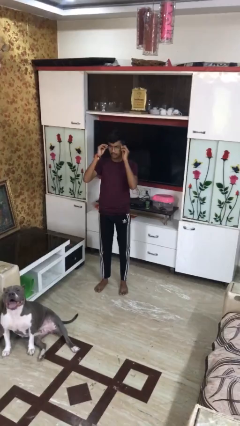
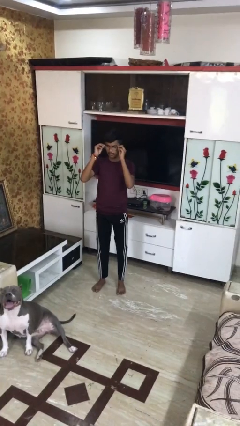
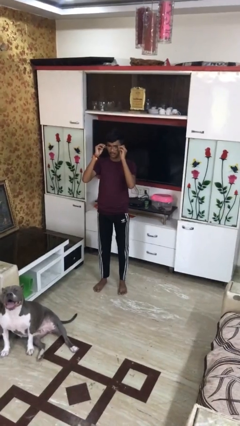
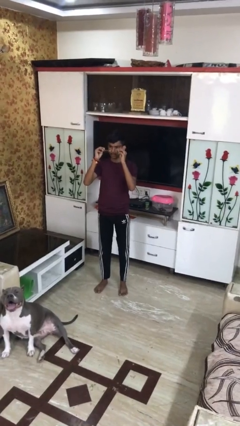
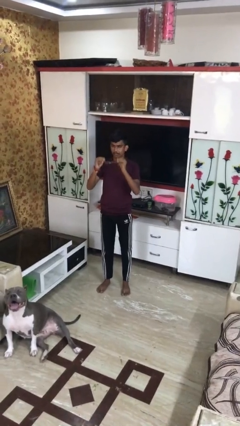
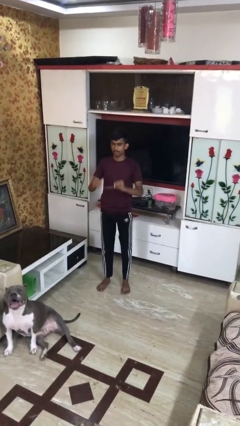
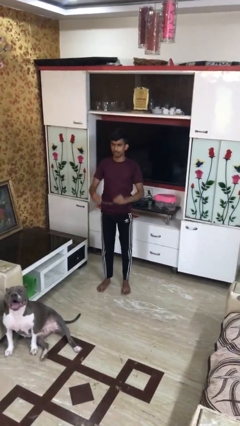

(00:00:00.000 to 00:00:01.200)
person takes off glasses

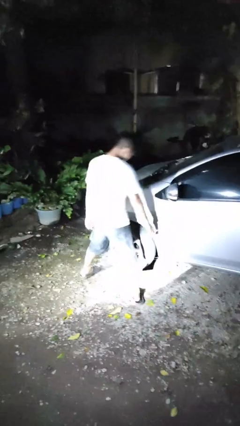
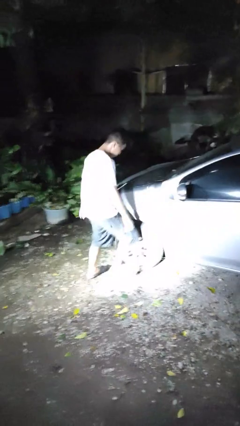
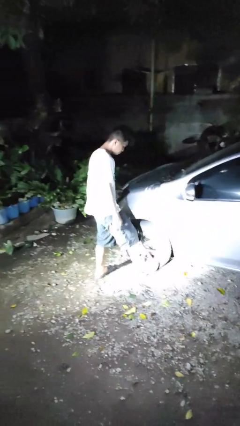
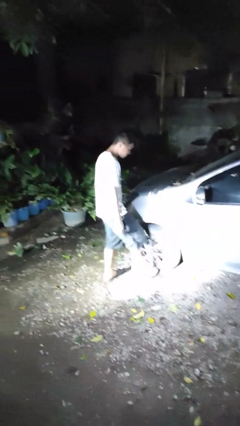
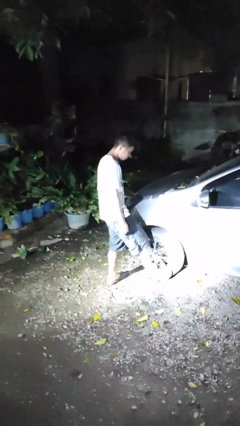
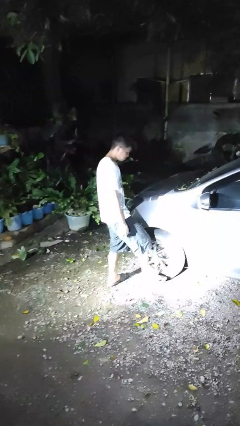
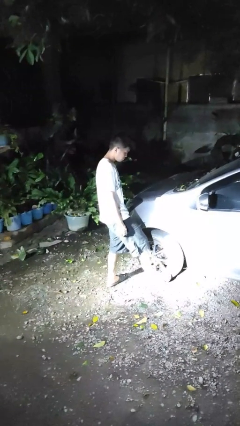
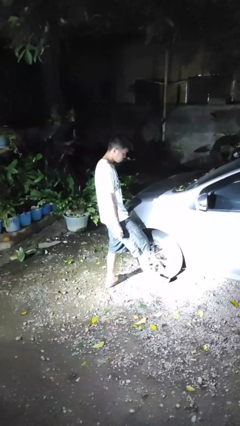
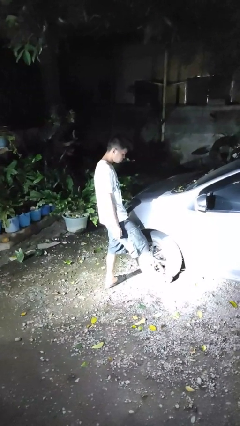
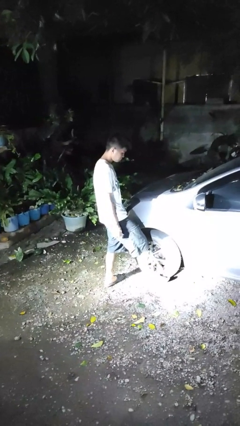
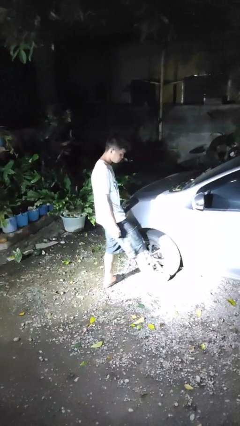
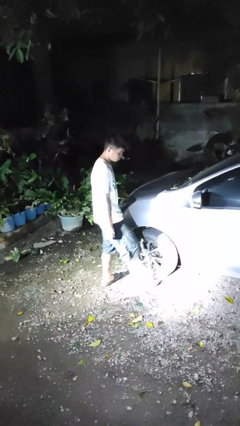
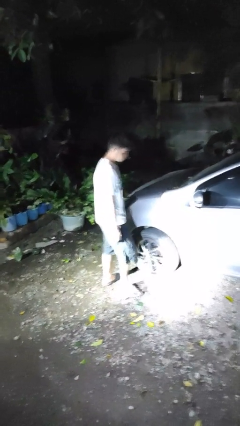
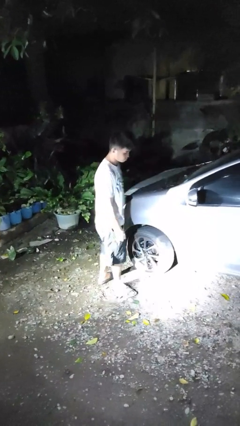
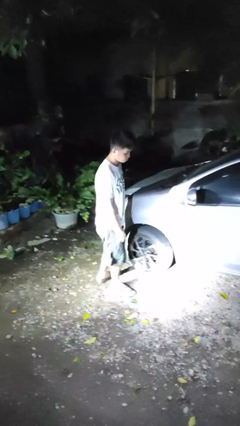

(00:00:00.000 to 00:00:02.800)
person kicks car tires

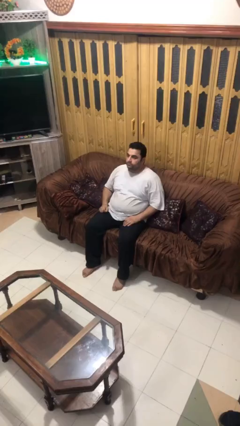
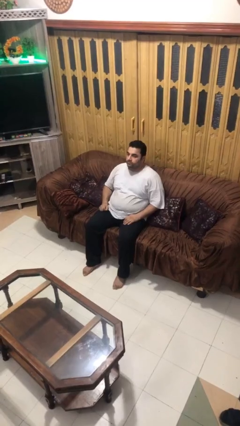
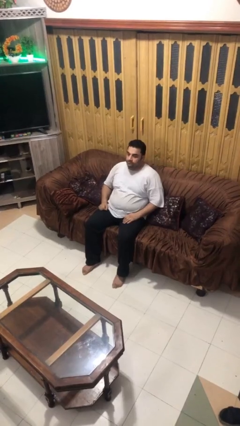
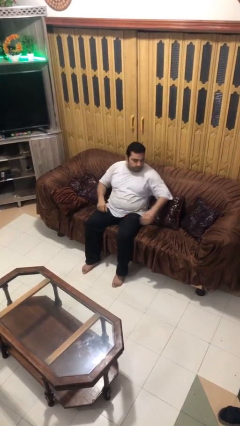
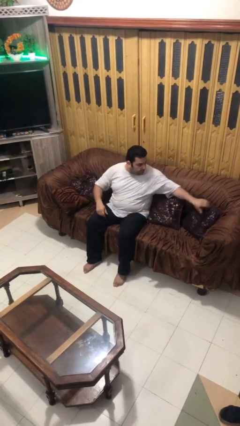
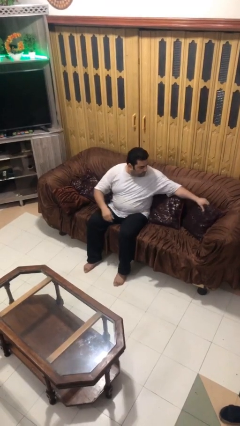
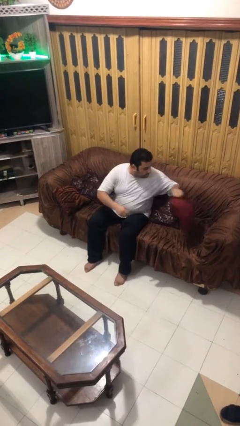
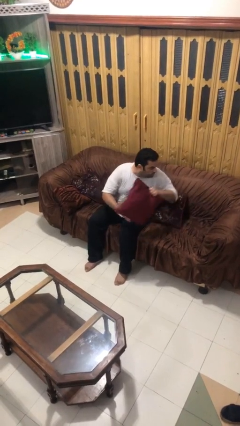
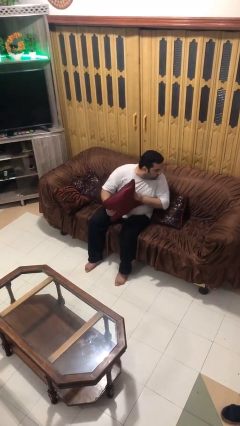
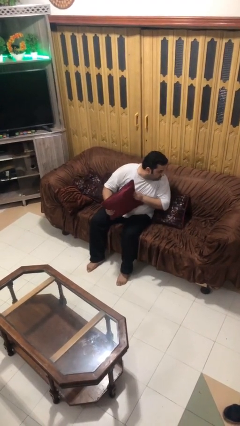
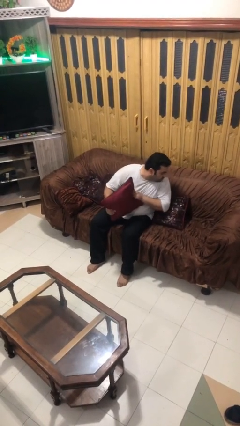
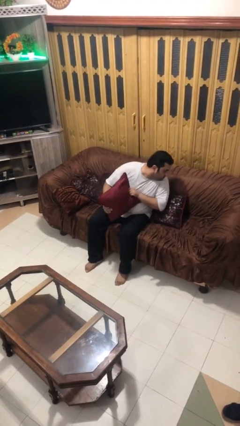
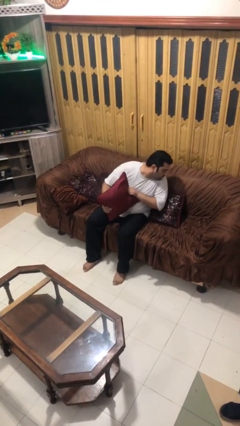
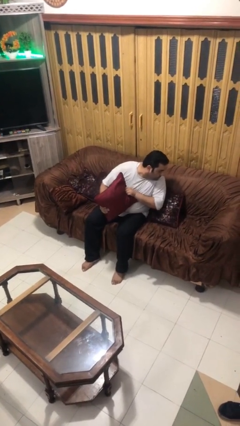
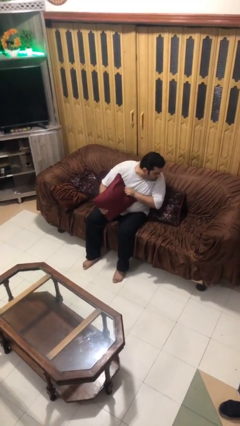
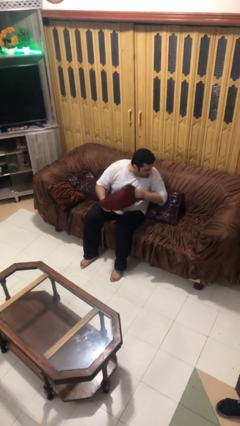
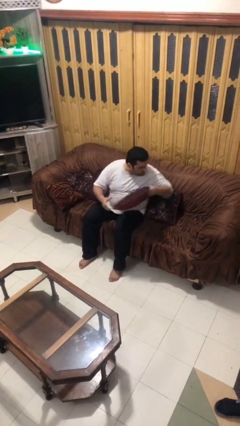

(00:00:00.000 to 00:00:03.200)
person searches in couch

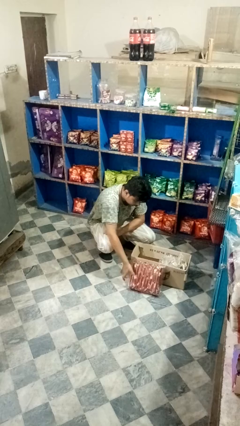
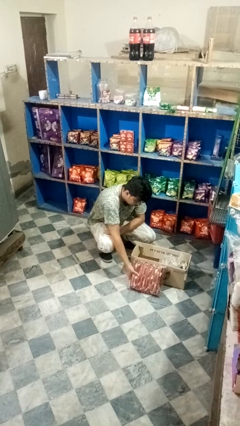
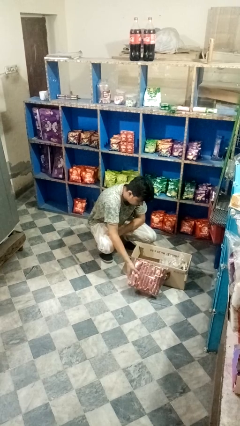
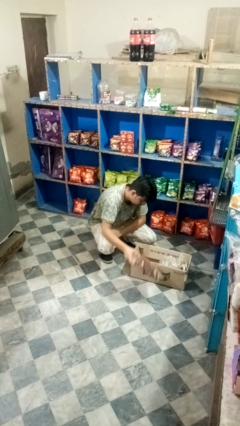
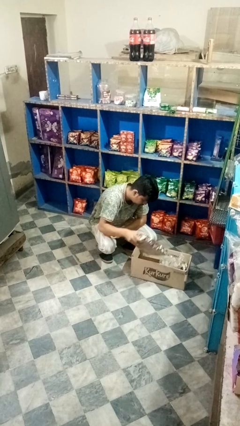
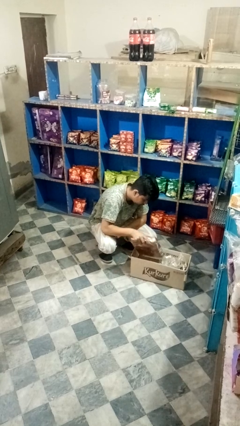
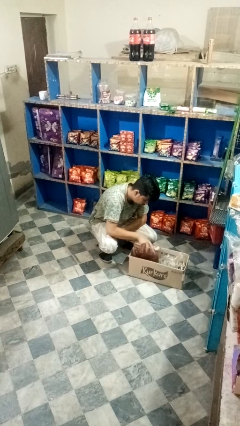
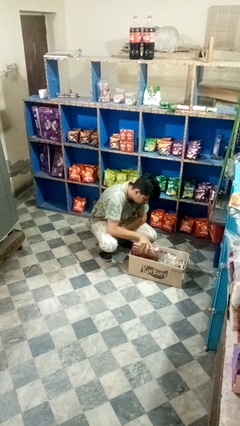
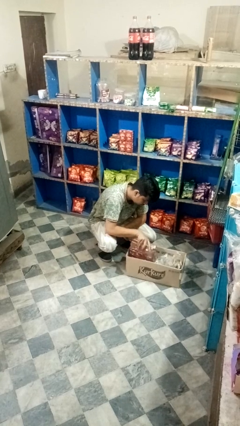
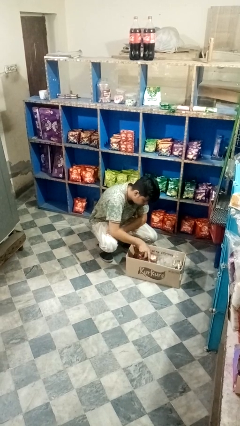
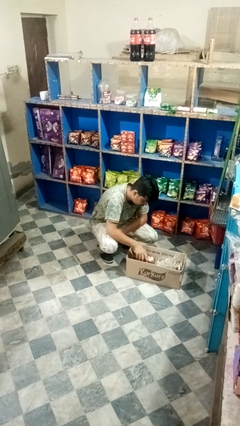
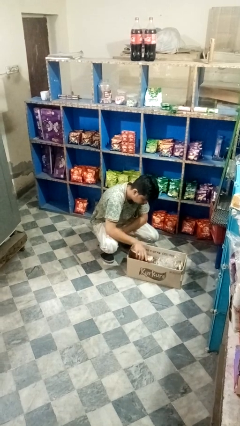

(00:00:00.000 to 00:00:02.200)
person puts object into box

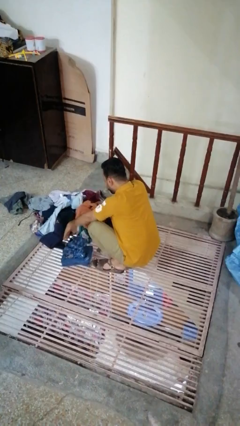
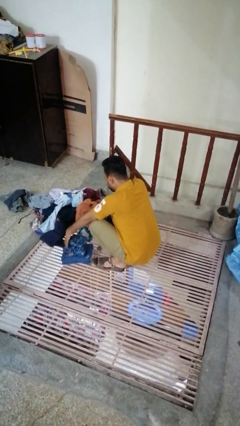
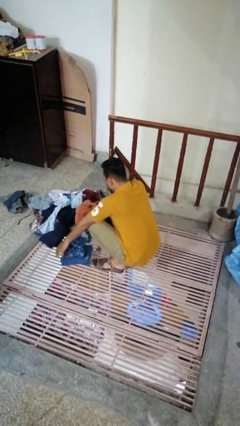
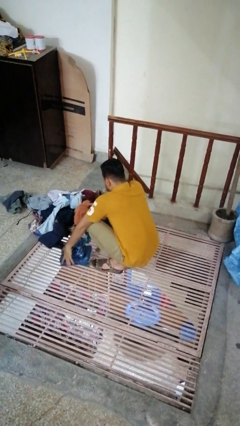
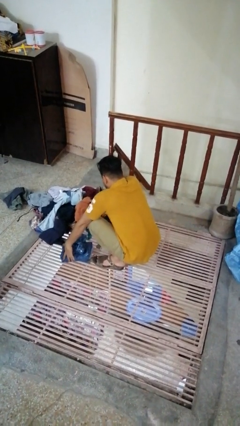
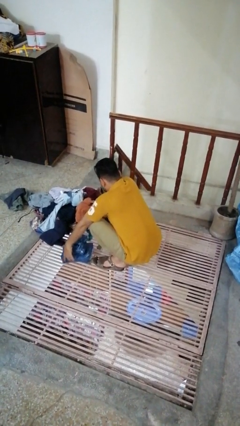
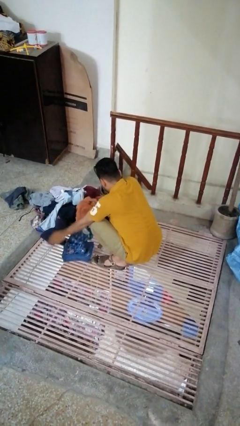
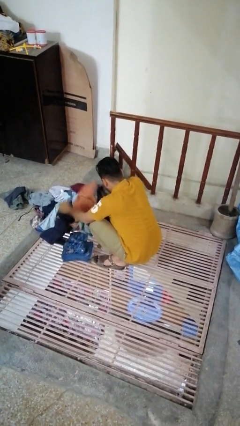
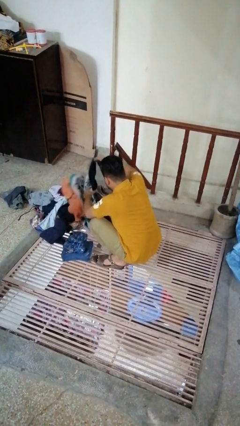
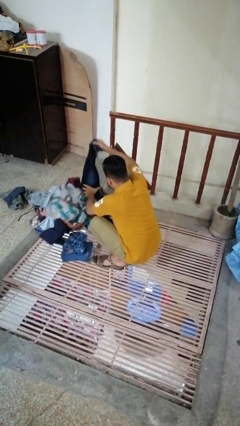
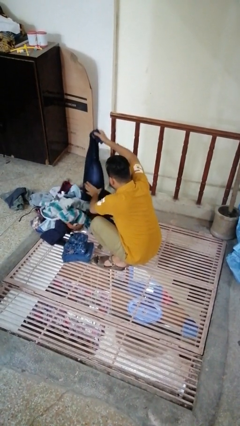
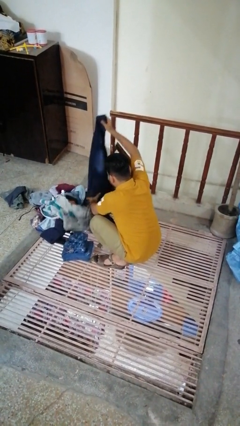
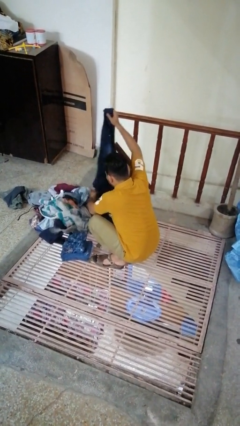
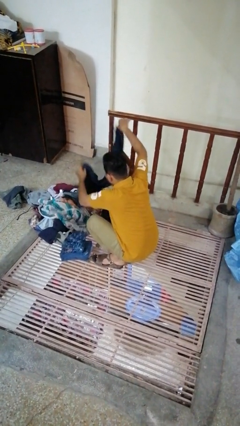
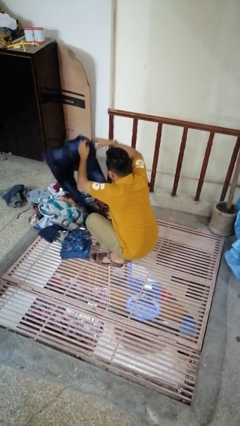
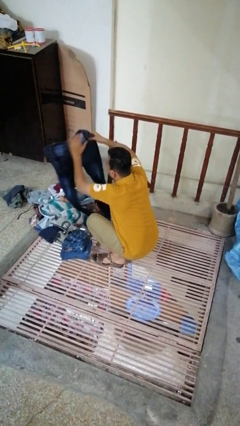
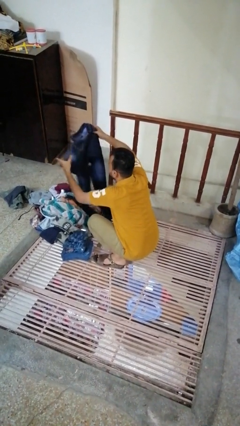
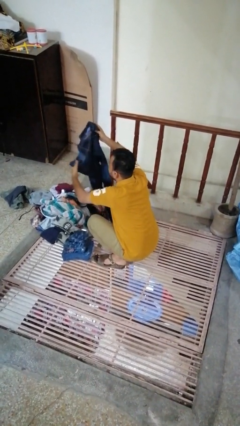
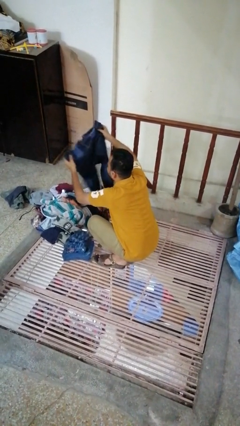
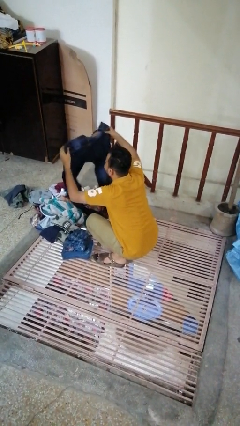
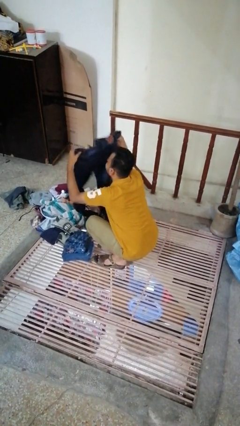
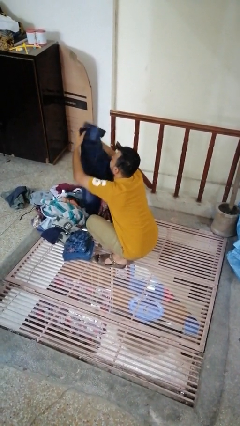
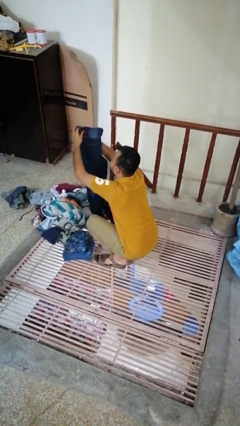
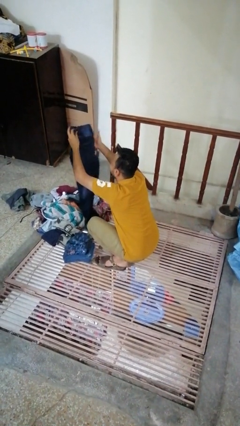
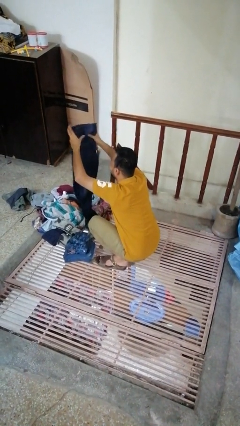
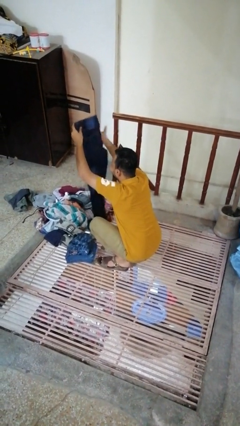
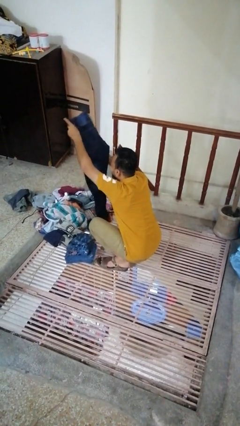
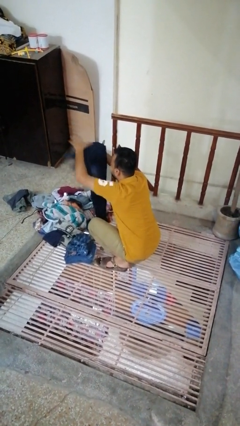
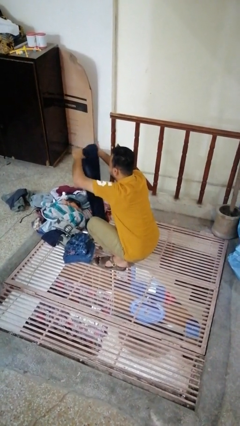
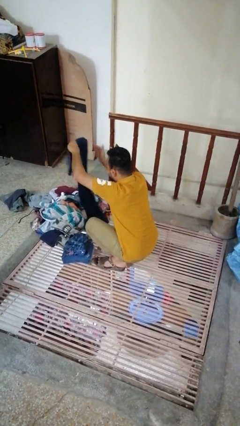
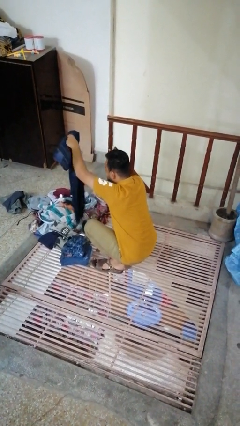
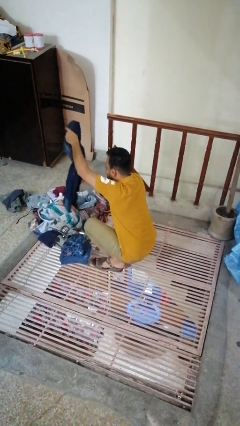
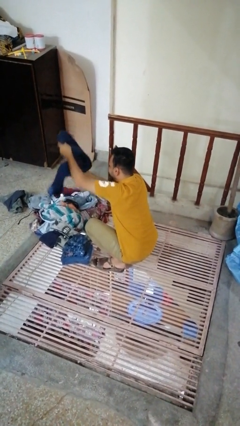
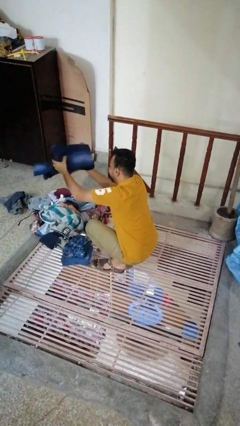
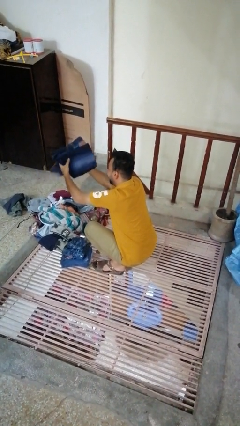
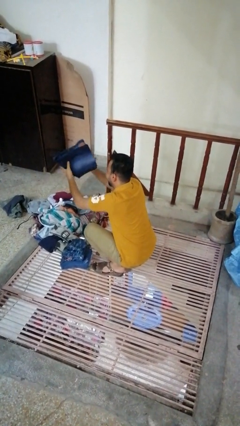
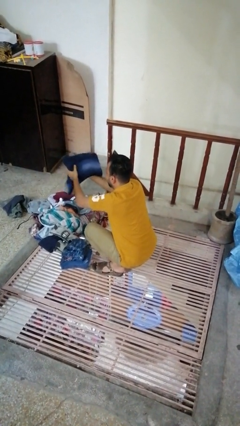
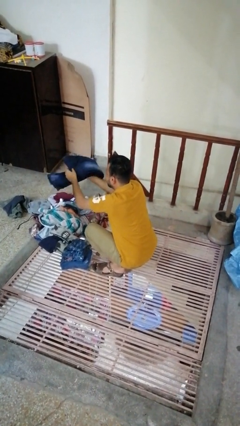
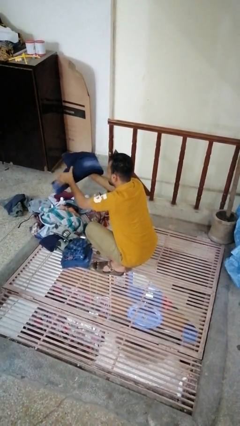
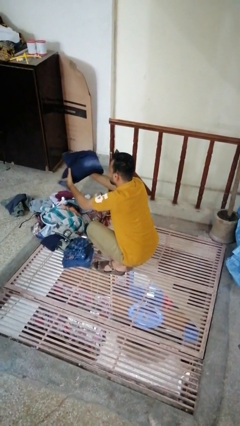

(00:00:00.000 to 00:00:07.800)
person folds pants

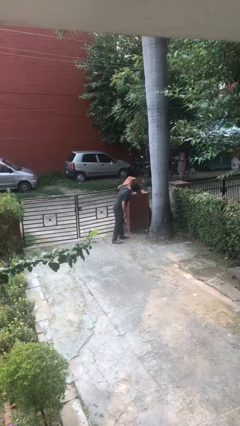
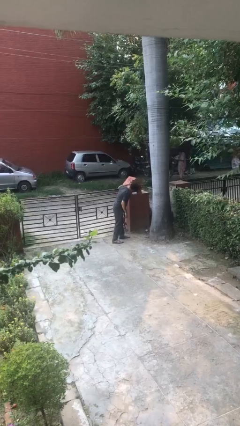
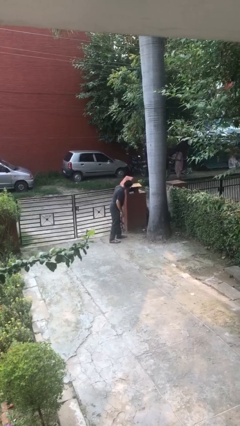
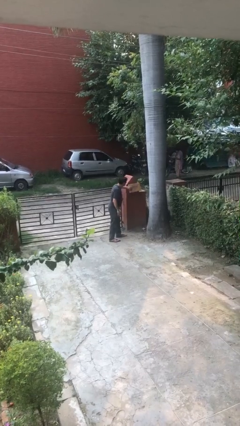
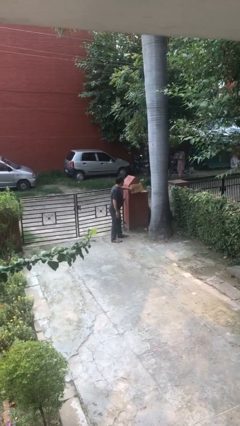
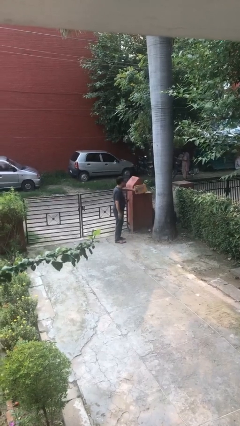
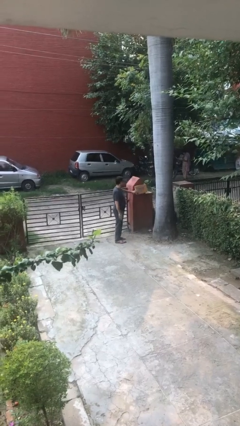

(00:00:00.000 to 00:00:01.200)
person closes mailbox
